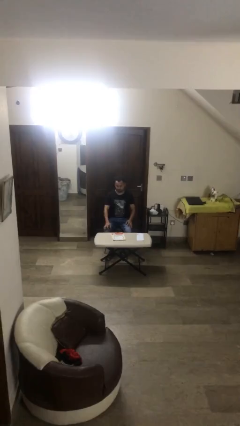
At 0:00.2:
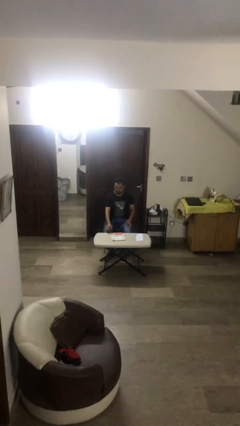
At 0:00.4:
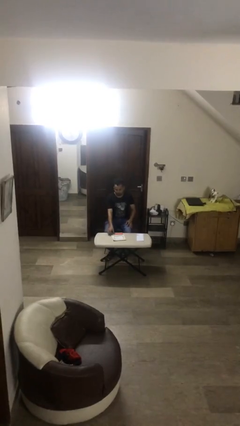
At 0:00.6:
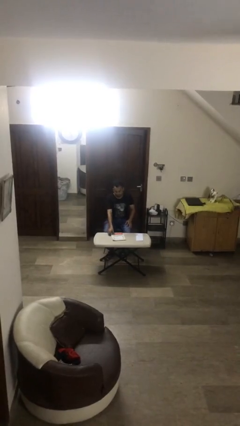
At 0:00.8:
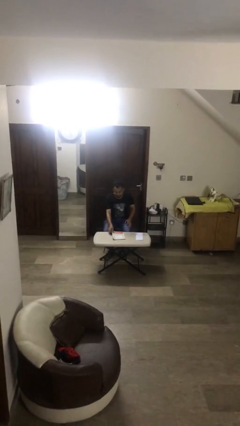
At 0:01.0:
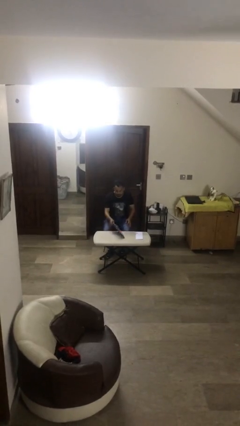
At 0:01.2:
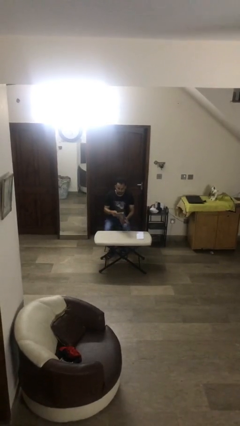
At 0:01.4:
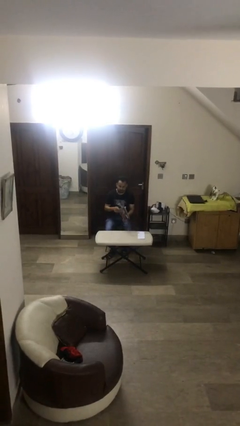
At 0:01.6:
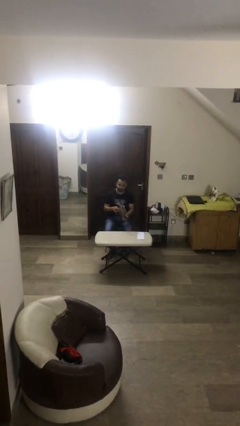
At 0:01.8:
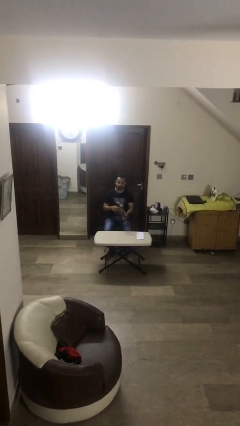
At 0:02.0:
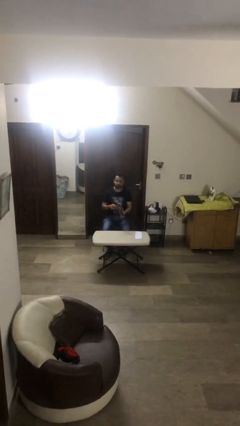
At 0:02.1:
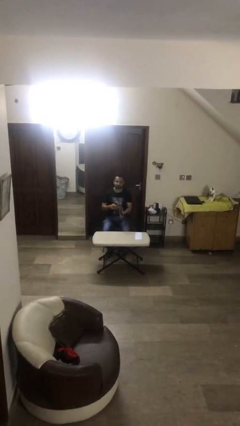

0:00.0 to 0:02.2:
person picks up object from table

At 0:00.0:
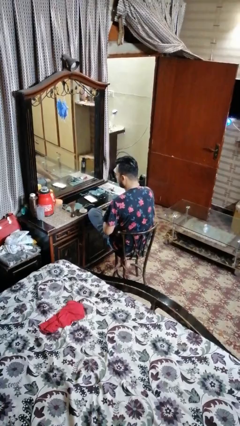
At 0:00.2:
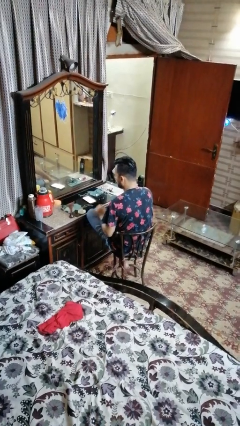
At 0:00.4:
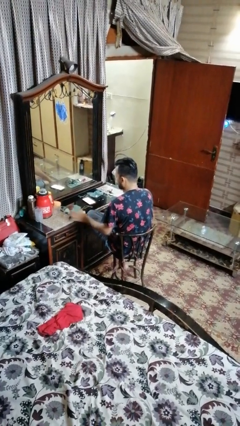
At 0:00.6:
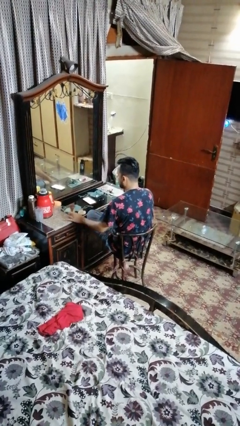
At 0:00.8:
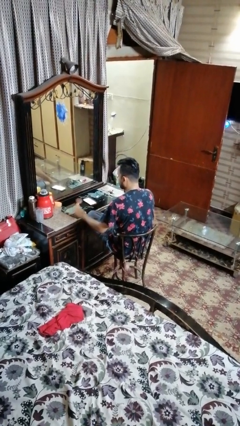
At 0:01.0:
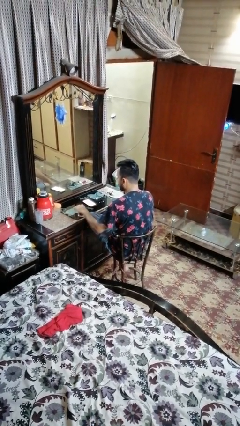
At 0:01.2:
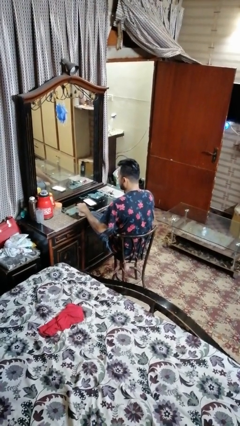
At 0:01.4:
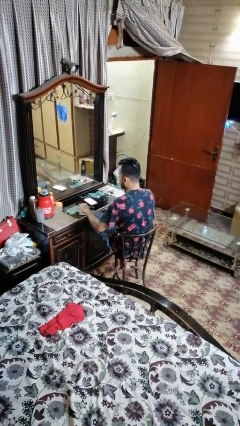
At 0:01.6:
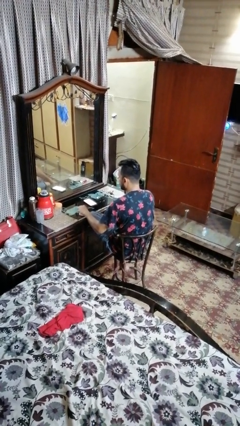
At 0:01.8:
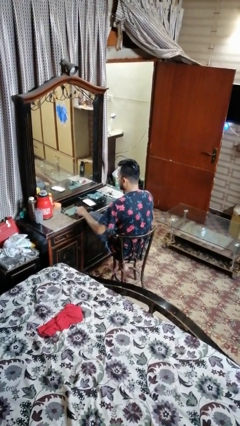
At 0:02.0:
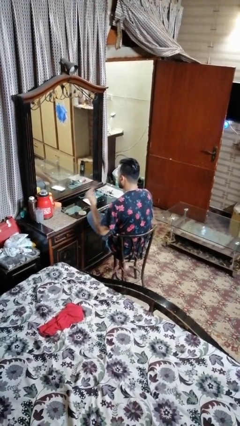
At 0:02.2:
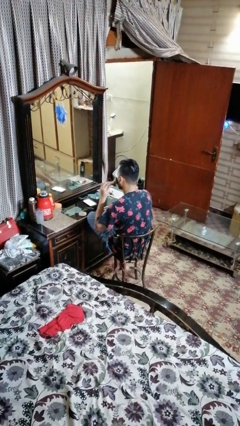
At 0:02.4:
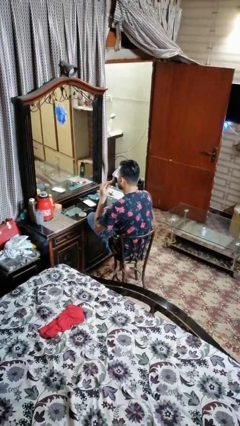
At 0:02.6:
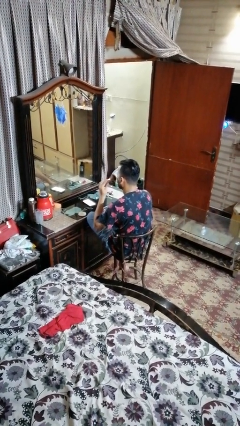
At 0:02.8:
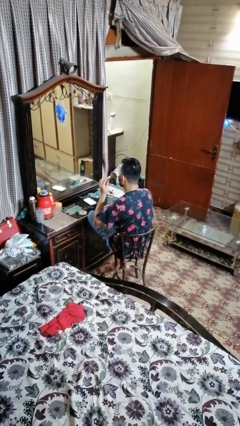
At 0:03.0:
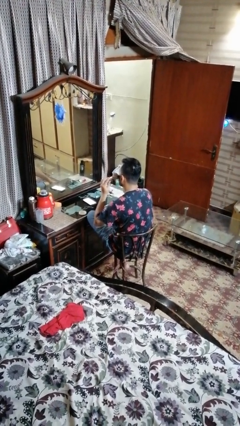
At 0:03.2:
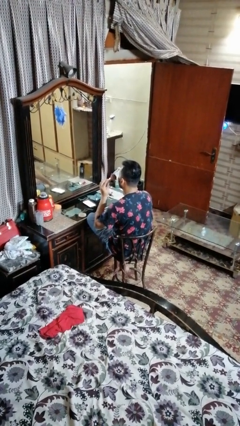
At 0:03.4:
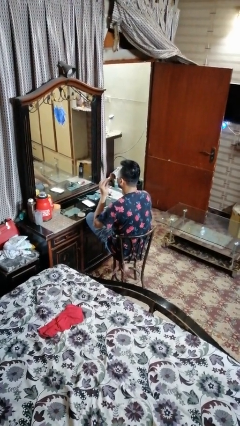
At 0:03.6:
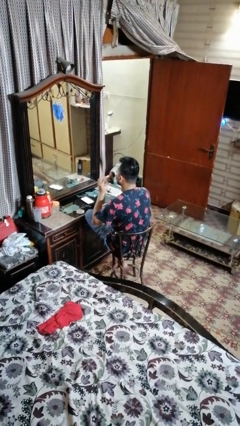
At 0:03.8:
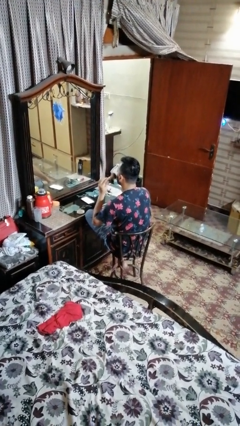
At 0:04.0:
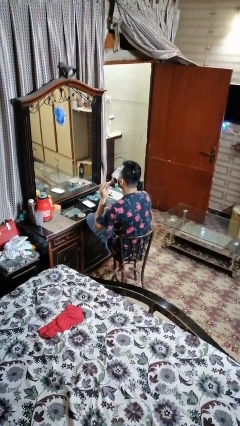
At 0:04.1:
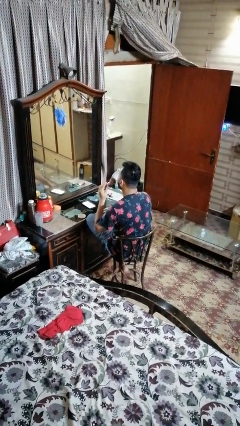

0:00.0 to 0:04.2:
person applies foundation makeup

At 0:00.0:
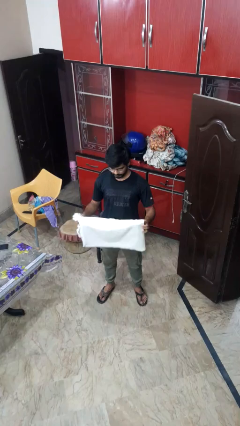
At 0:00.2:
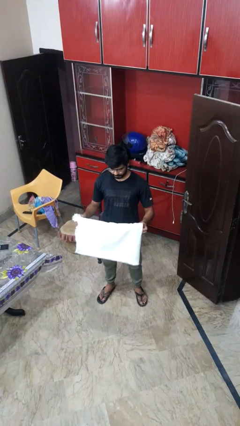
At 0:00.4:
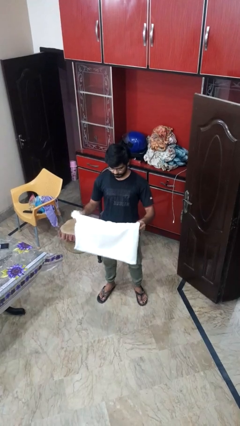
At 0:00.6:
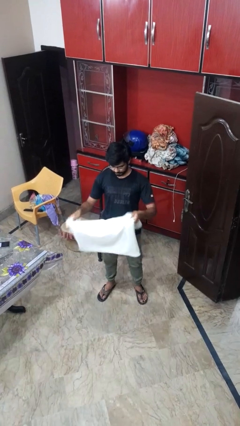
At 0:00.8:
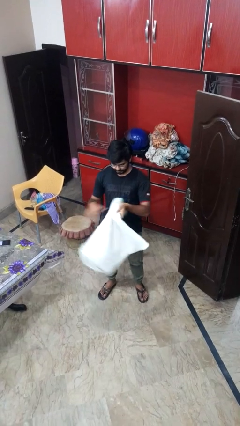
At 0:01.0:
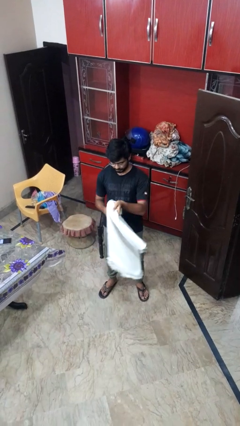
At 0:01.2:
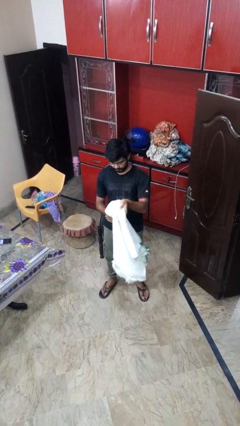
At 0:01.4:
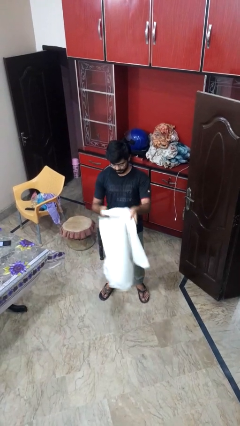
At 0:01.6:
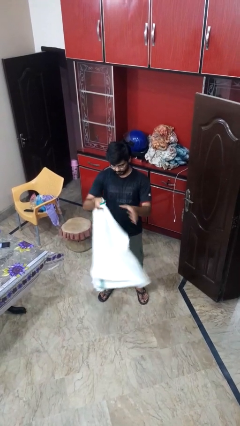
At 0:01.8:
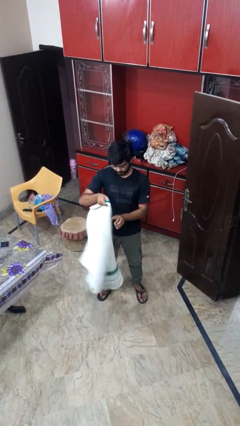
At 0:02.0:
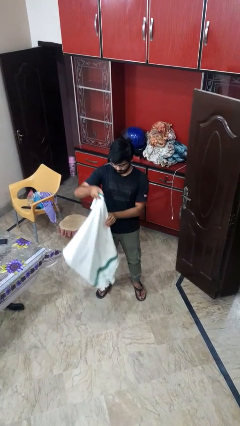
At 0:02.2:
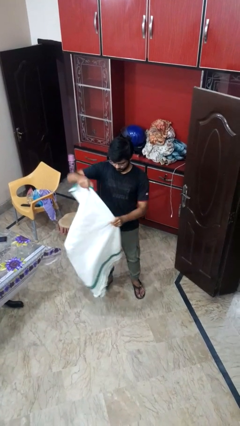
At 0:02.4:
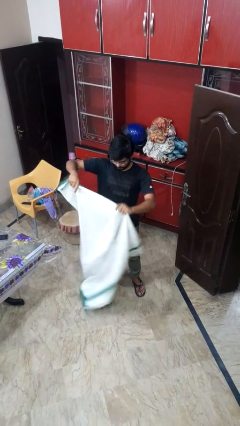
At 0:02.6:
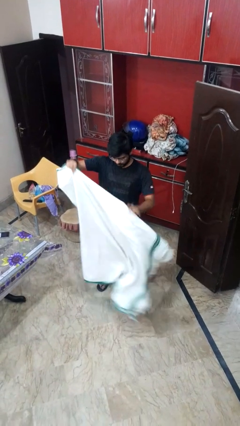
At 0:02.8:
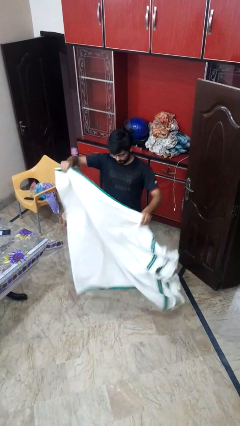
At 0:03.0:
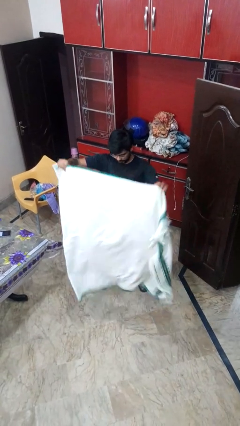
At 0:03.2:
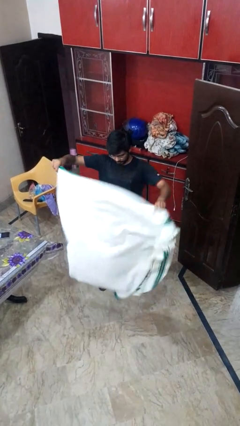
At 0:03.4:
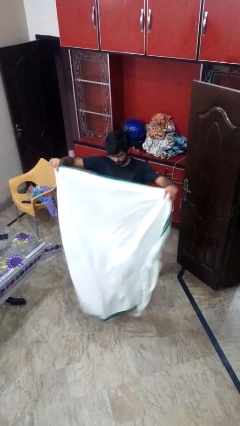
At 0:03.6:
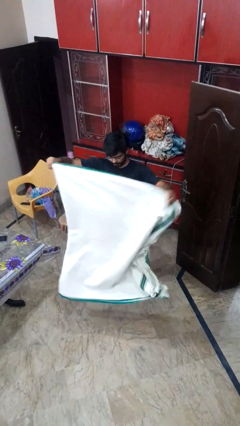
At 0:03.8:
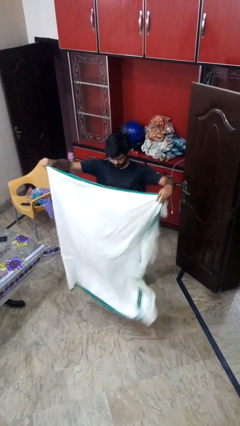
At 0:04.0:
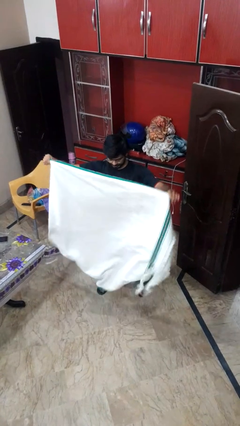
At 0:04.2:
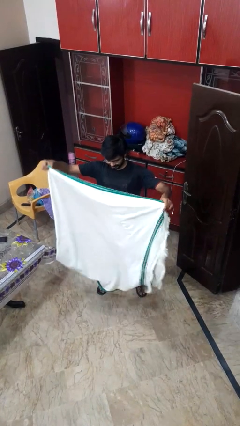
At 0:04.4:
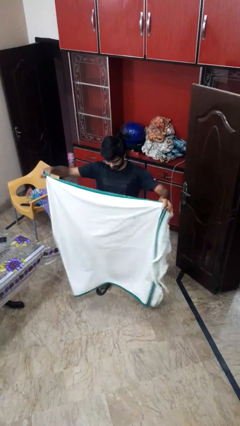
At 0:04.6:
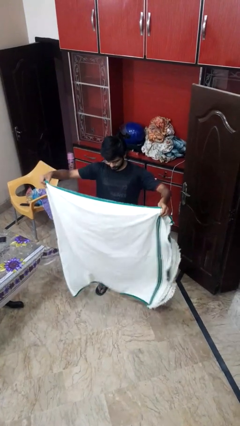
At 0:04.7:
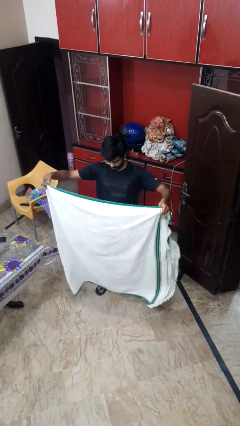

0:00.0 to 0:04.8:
person unfolds blanket

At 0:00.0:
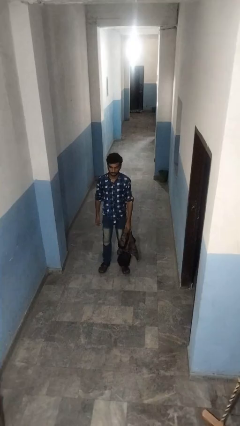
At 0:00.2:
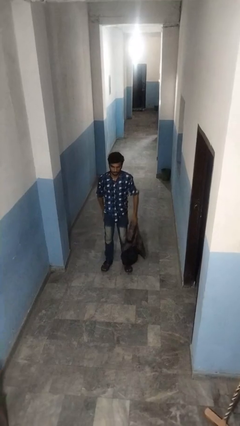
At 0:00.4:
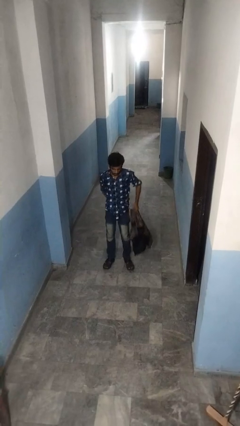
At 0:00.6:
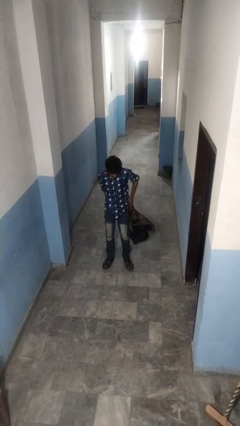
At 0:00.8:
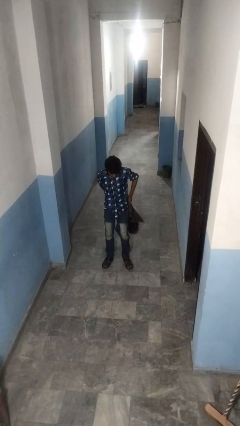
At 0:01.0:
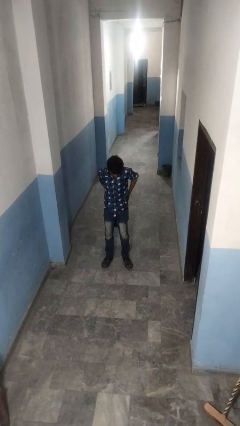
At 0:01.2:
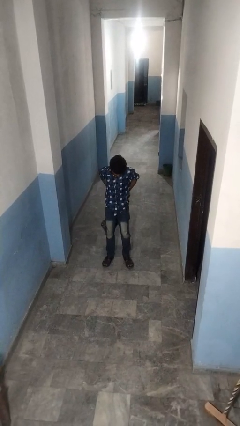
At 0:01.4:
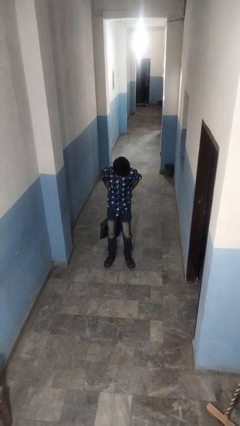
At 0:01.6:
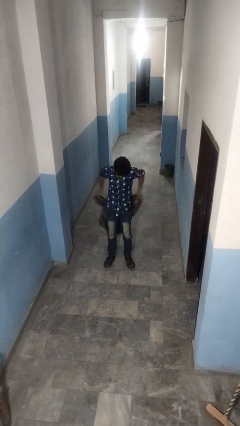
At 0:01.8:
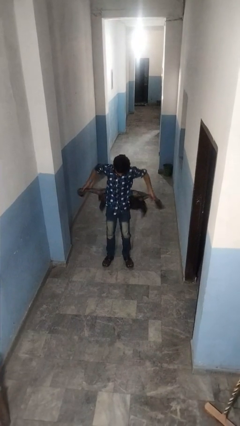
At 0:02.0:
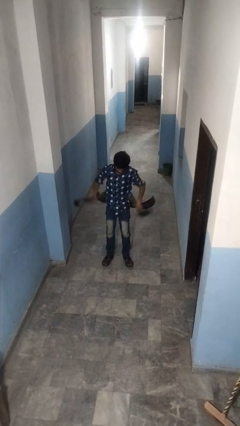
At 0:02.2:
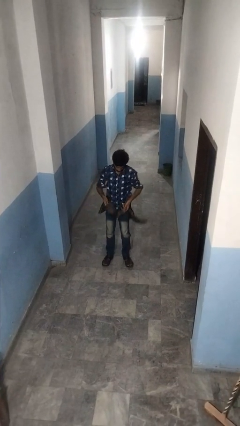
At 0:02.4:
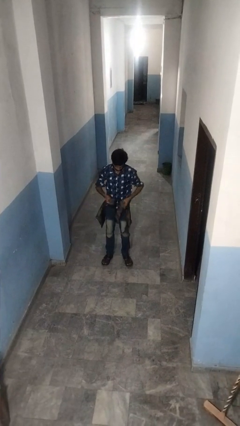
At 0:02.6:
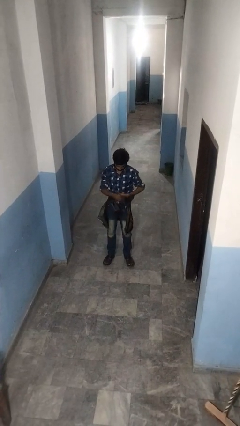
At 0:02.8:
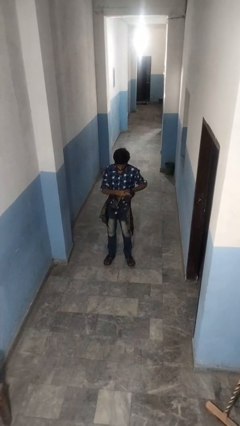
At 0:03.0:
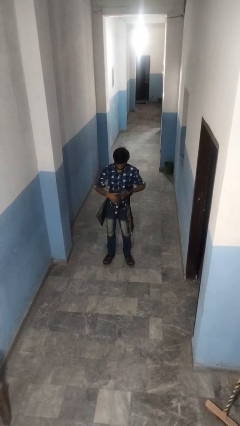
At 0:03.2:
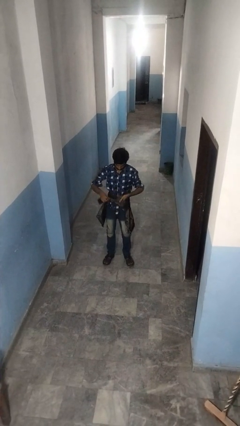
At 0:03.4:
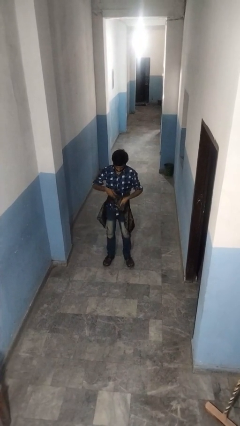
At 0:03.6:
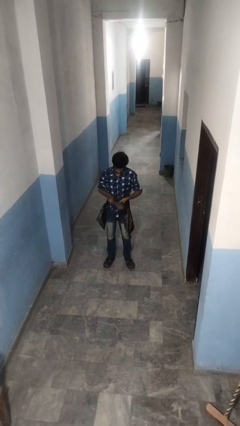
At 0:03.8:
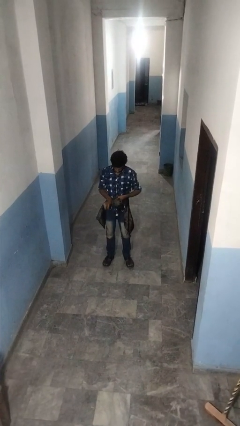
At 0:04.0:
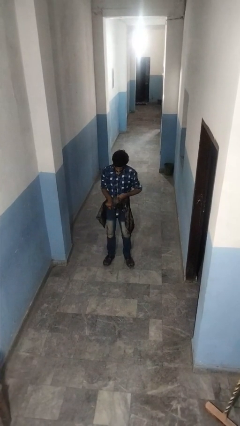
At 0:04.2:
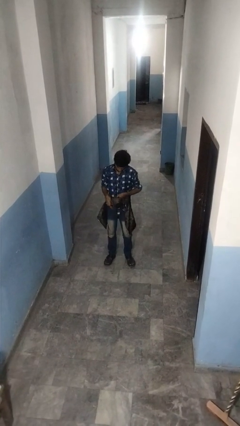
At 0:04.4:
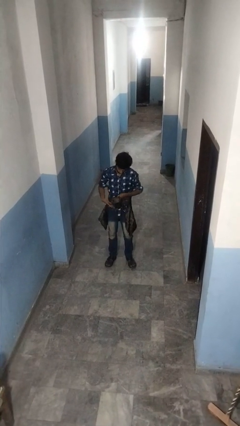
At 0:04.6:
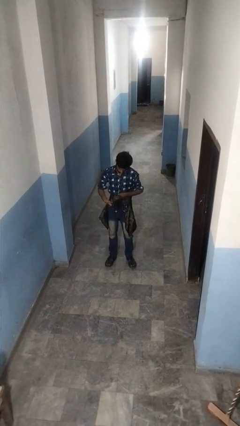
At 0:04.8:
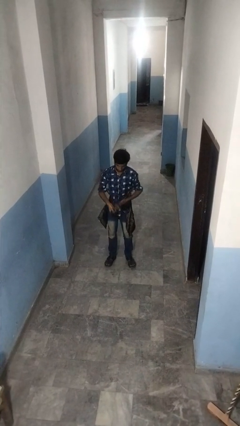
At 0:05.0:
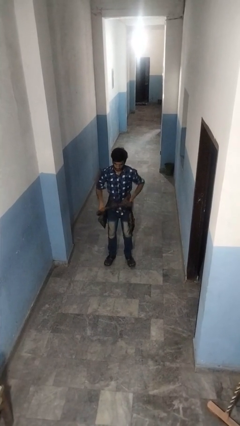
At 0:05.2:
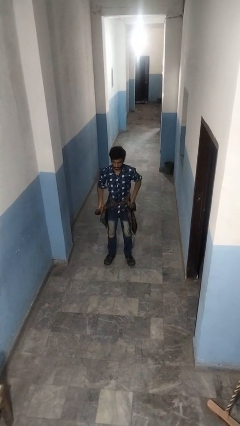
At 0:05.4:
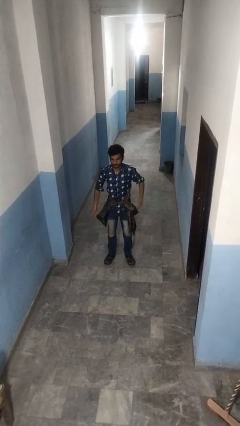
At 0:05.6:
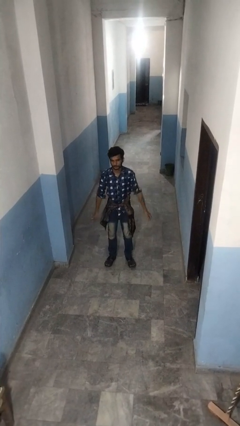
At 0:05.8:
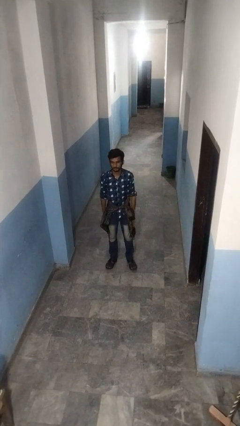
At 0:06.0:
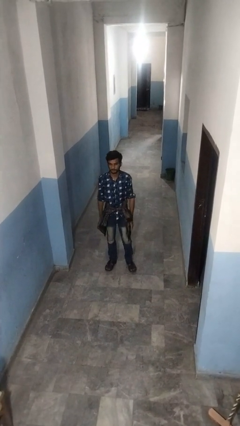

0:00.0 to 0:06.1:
person ties jacket around waist

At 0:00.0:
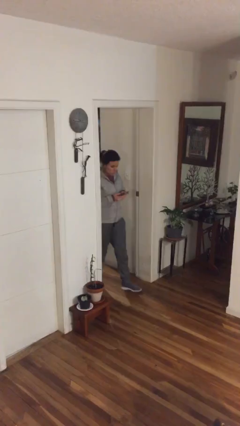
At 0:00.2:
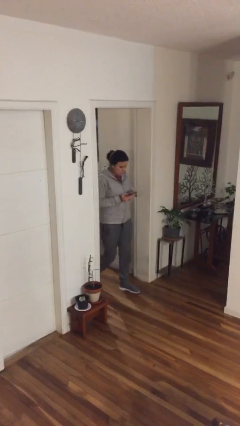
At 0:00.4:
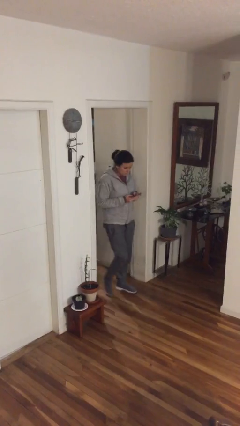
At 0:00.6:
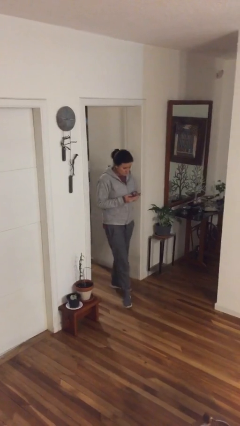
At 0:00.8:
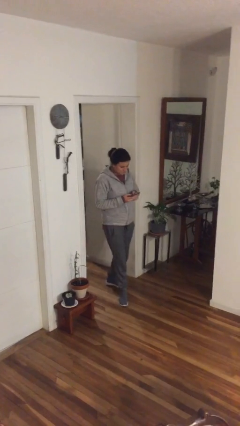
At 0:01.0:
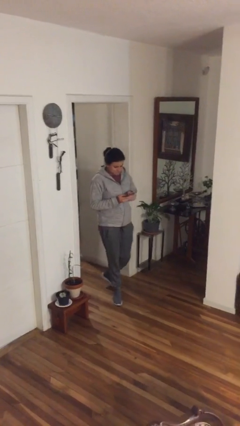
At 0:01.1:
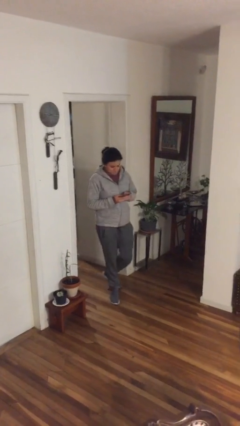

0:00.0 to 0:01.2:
person enters scene through structure
